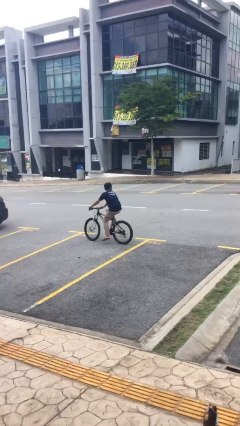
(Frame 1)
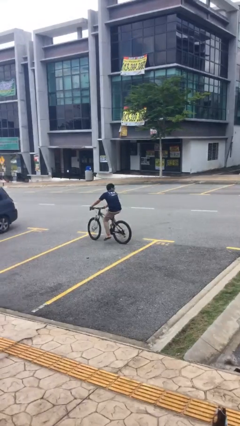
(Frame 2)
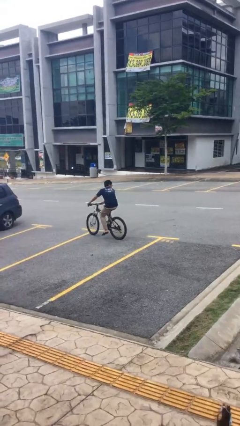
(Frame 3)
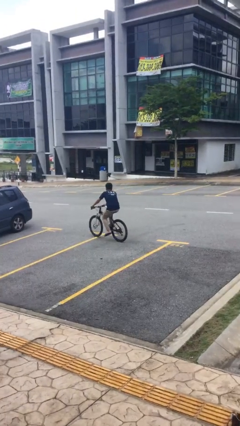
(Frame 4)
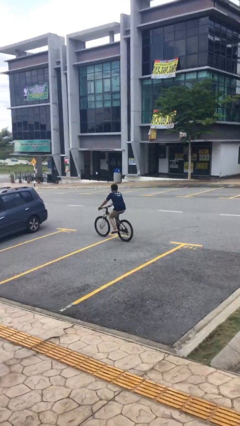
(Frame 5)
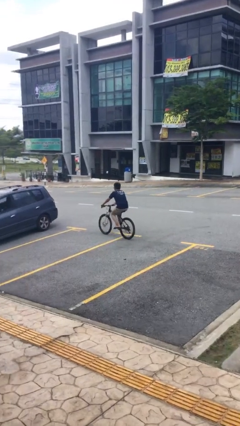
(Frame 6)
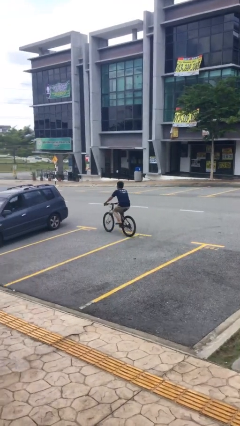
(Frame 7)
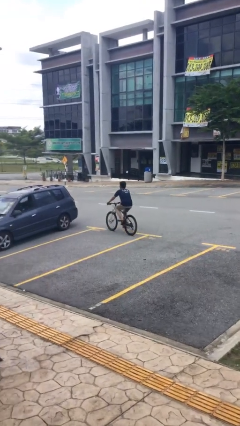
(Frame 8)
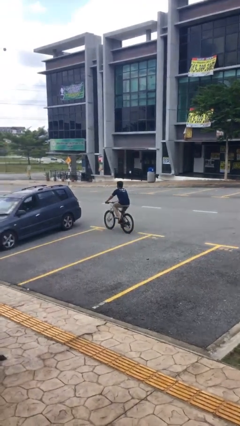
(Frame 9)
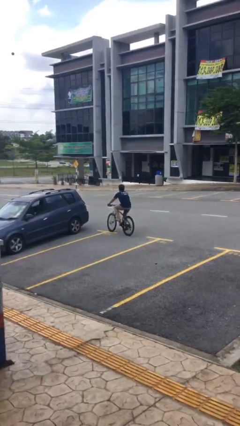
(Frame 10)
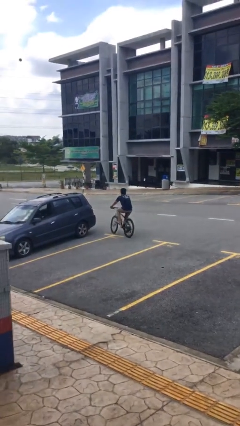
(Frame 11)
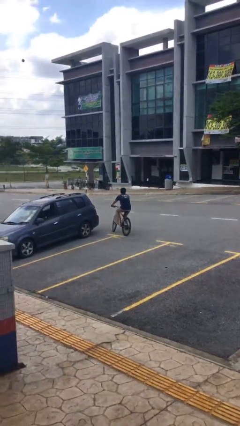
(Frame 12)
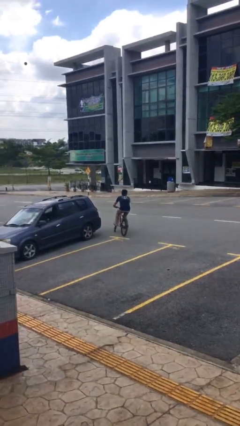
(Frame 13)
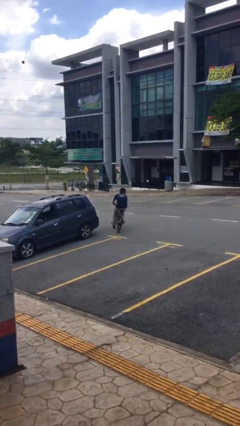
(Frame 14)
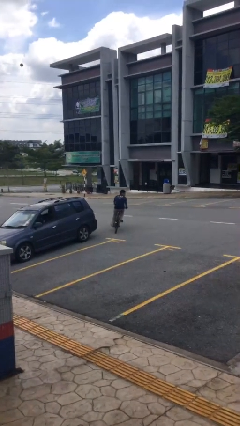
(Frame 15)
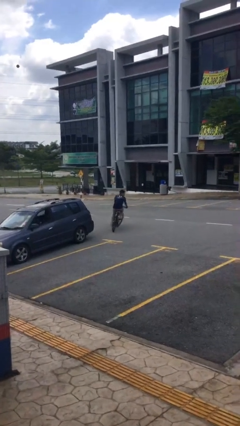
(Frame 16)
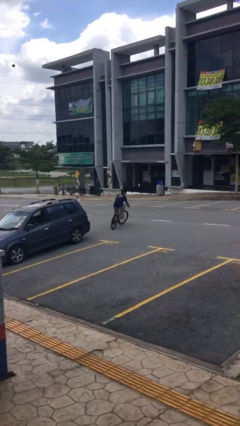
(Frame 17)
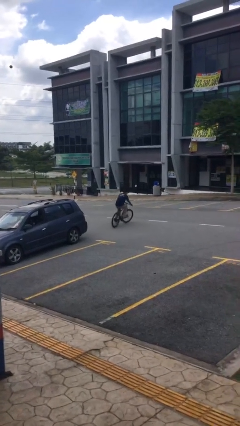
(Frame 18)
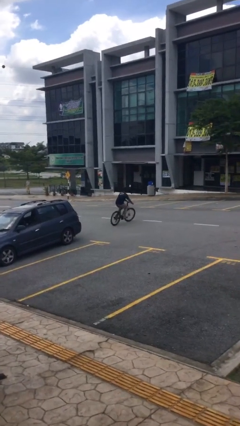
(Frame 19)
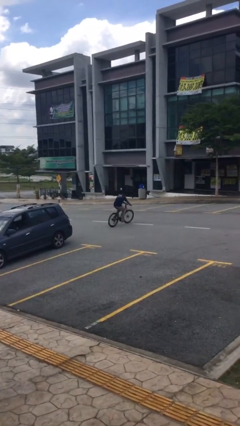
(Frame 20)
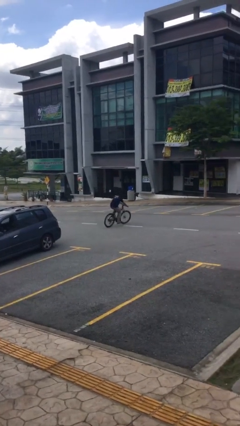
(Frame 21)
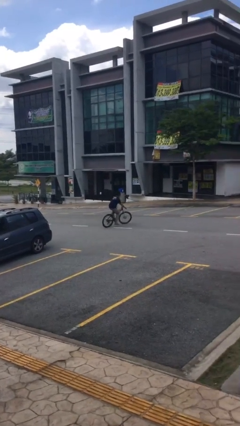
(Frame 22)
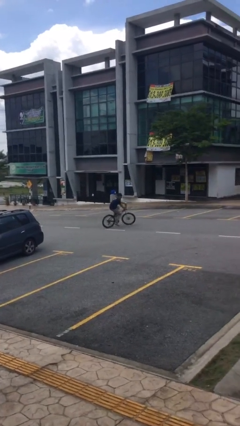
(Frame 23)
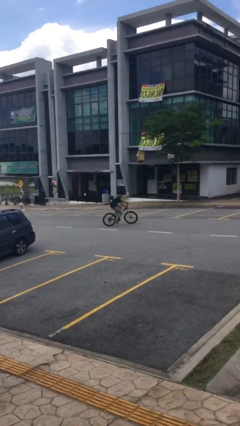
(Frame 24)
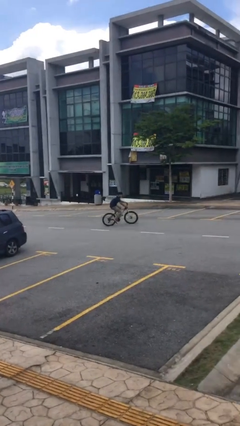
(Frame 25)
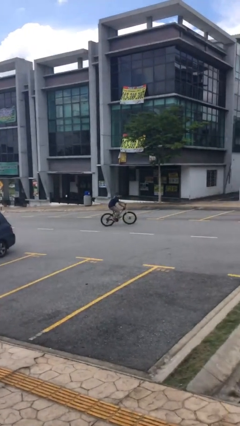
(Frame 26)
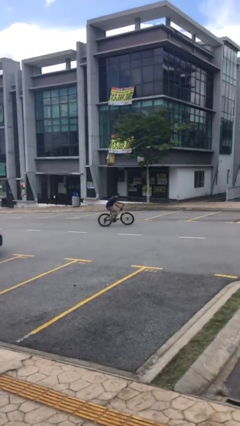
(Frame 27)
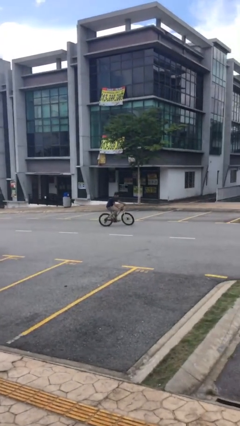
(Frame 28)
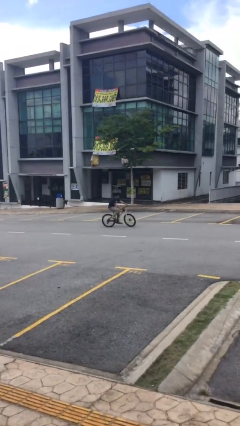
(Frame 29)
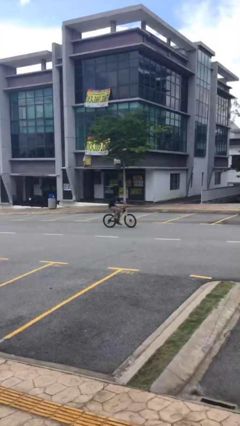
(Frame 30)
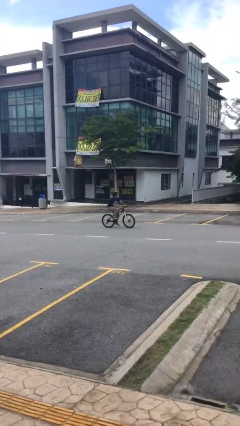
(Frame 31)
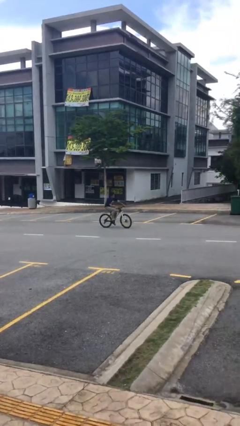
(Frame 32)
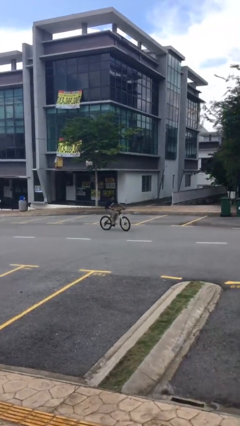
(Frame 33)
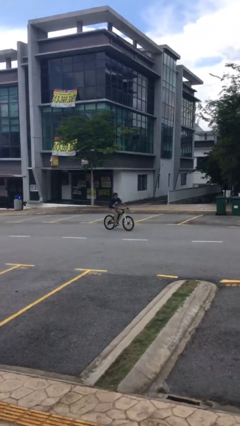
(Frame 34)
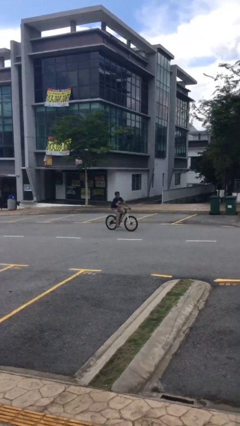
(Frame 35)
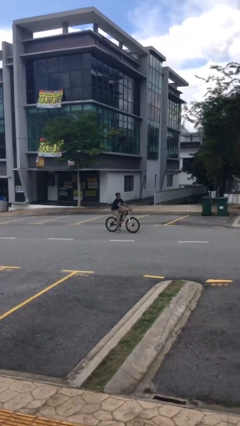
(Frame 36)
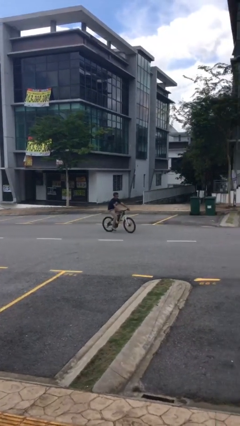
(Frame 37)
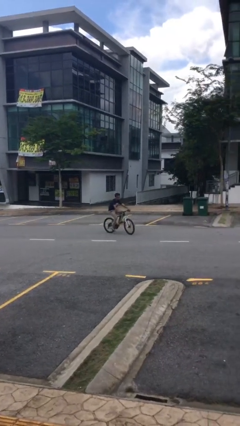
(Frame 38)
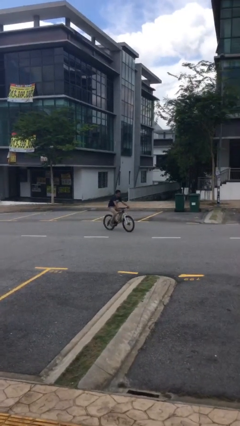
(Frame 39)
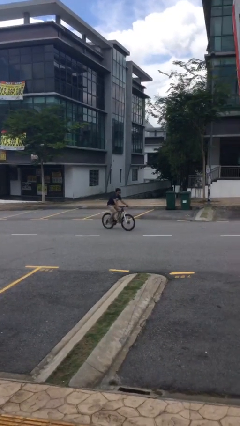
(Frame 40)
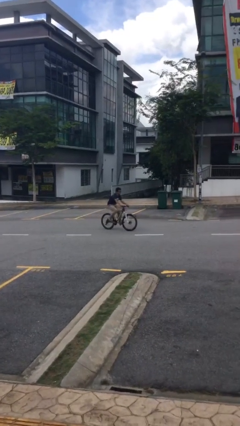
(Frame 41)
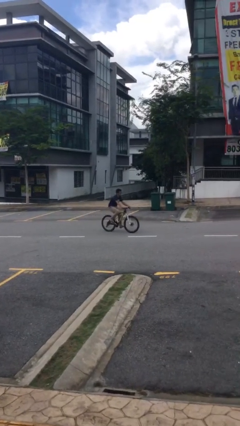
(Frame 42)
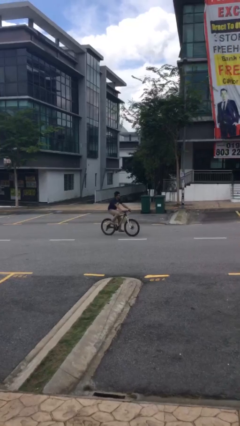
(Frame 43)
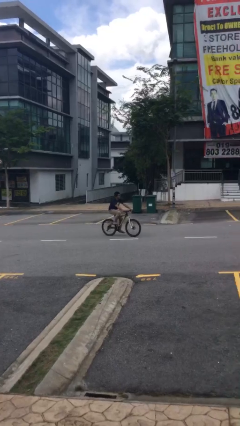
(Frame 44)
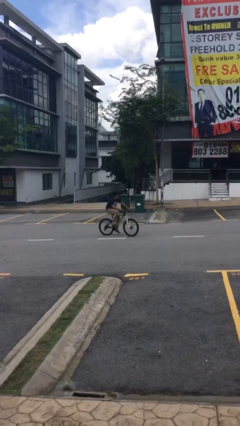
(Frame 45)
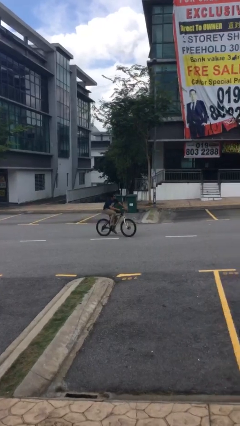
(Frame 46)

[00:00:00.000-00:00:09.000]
person rides bicycle

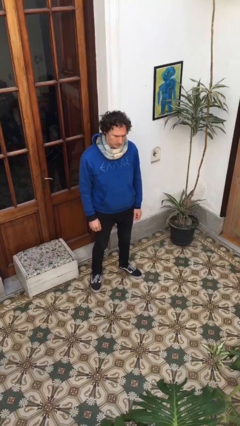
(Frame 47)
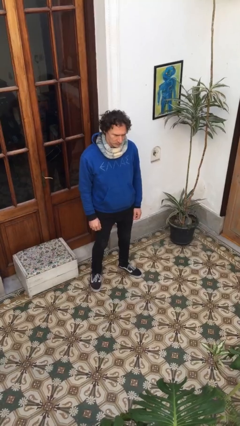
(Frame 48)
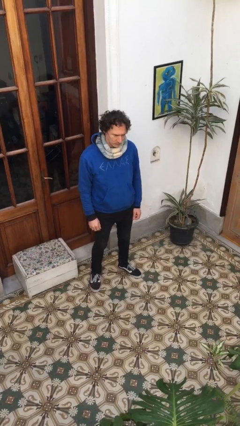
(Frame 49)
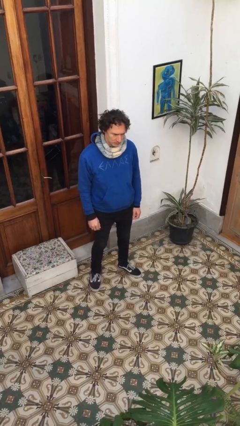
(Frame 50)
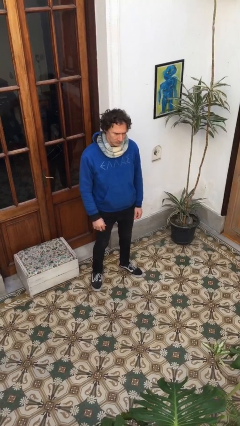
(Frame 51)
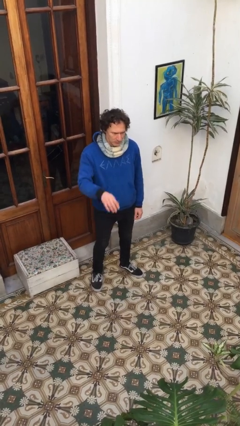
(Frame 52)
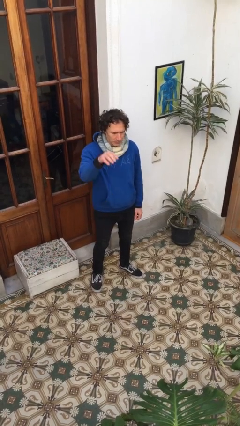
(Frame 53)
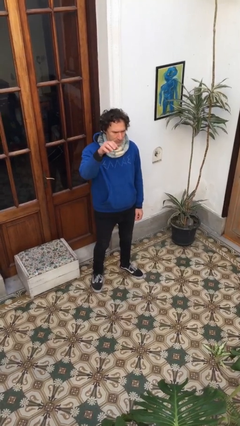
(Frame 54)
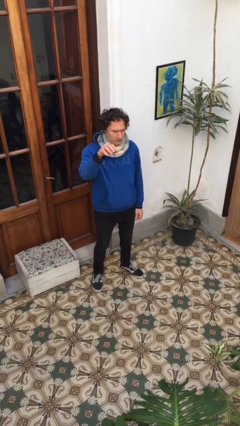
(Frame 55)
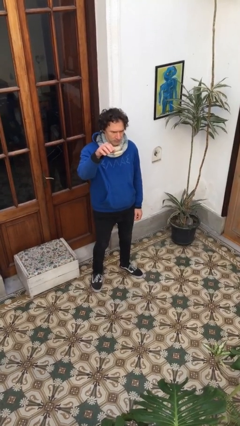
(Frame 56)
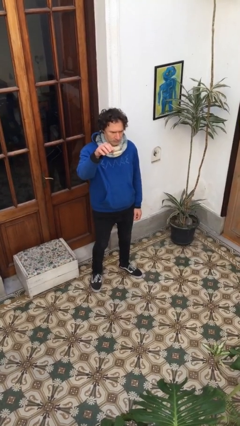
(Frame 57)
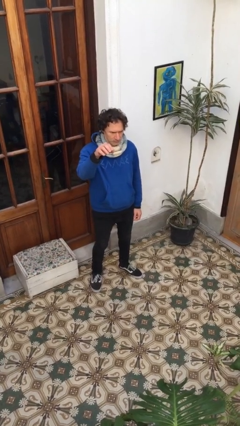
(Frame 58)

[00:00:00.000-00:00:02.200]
person gestures swipe up

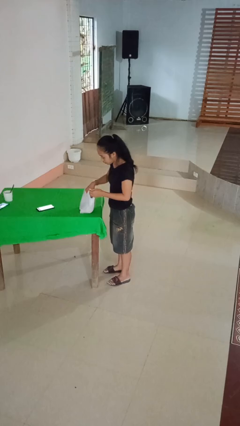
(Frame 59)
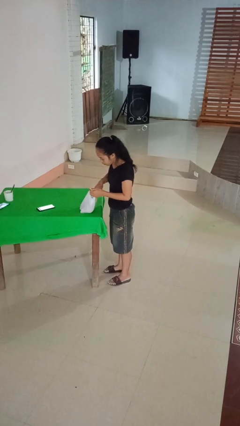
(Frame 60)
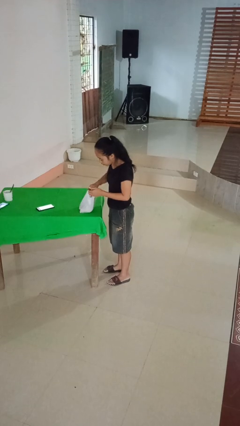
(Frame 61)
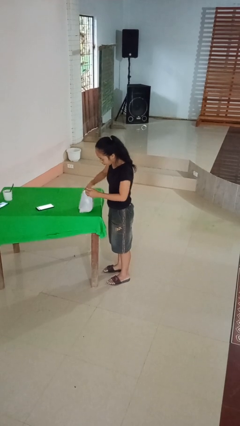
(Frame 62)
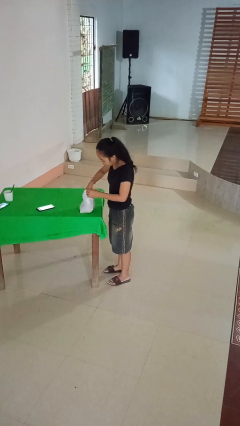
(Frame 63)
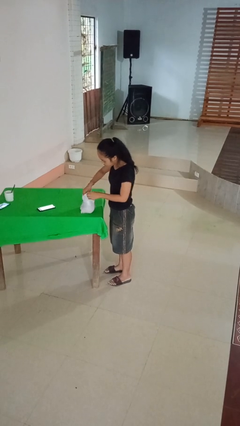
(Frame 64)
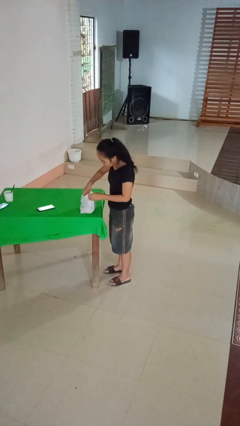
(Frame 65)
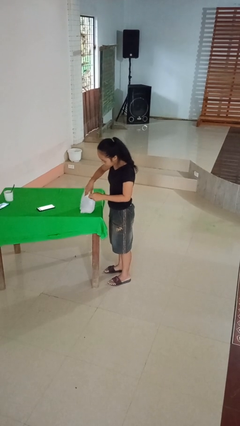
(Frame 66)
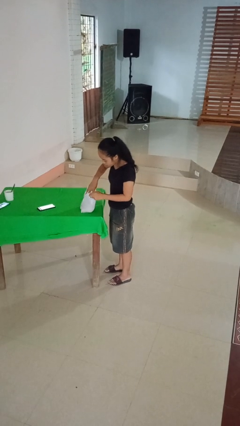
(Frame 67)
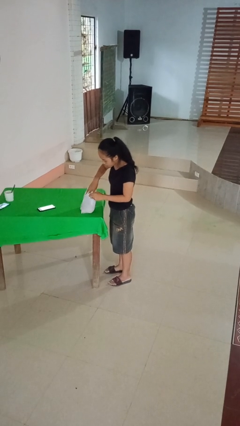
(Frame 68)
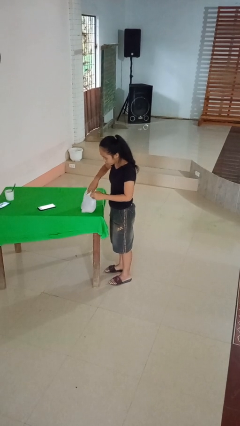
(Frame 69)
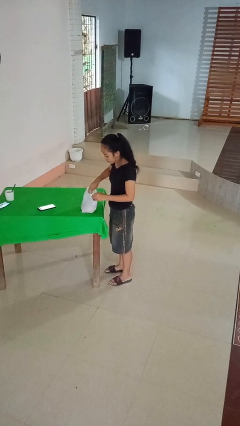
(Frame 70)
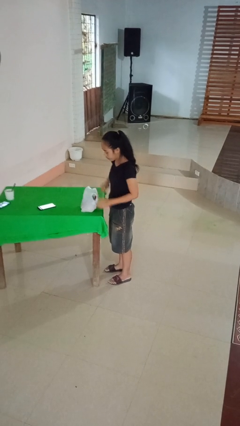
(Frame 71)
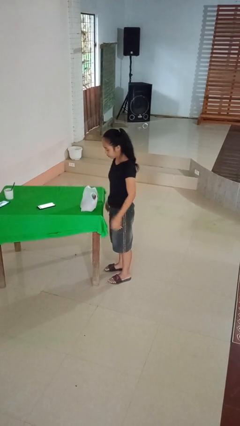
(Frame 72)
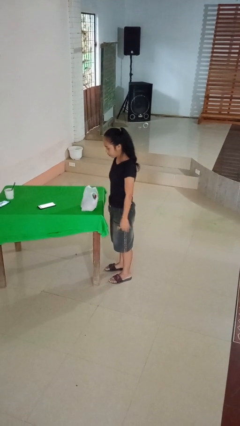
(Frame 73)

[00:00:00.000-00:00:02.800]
person searches in bag

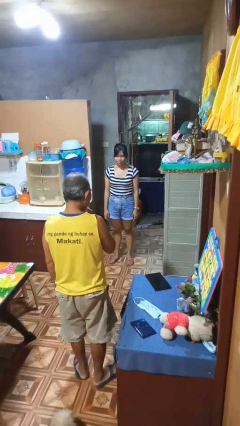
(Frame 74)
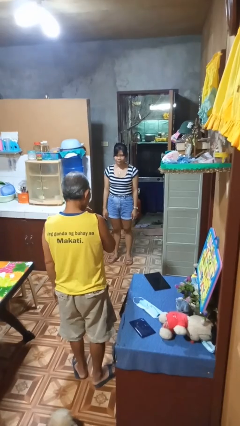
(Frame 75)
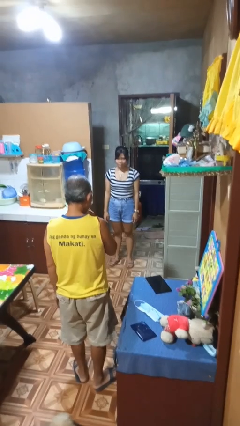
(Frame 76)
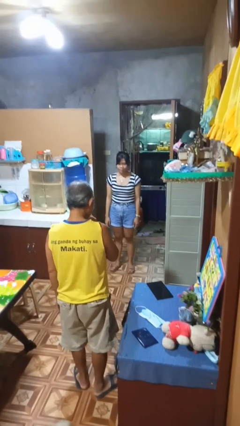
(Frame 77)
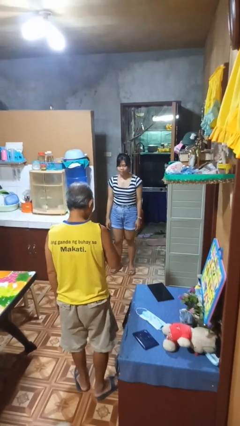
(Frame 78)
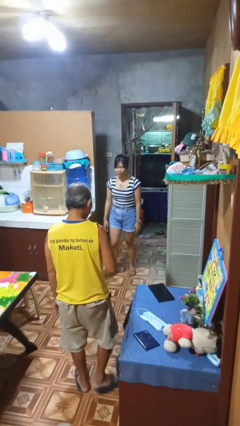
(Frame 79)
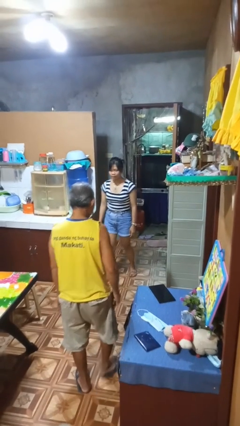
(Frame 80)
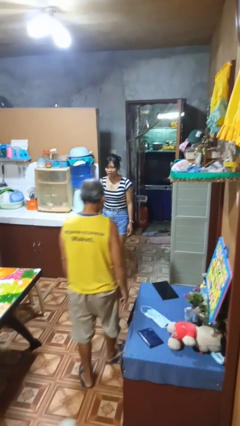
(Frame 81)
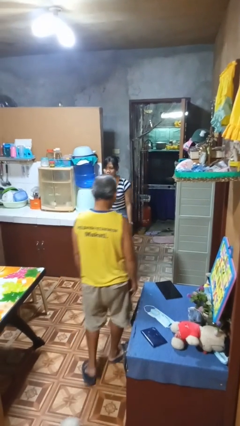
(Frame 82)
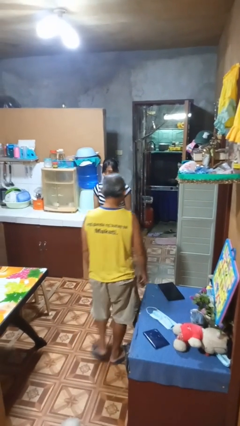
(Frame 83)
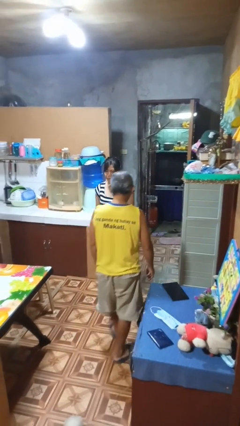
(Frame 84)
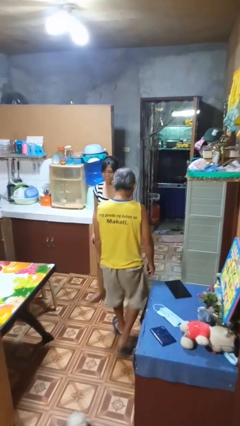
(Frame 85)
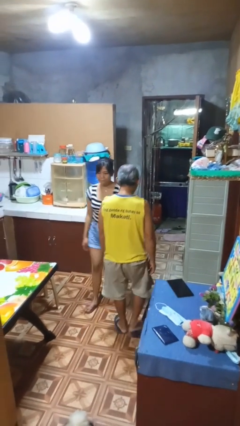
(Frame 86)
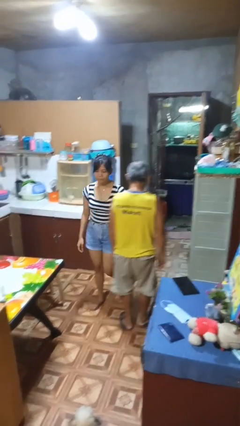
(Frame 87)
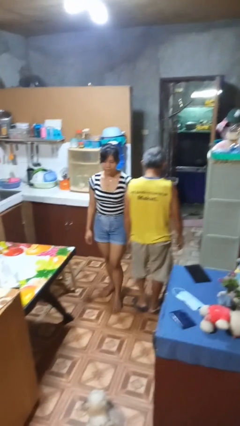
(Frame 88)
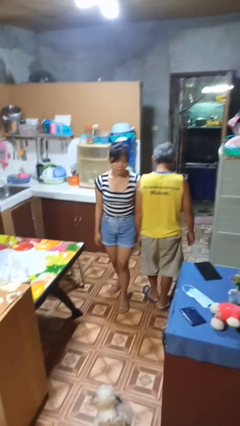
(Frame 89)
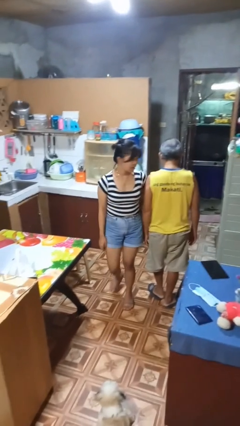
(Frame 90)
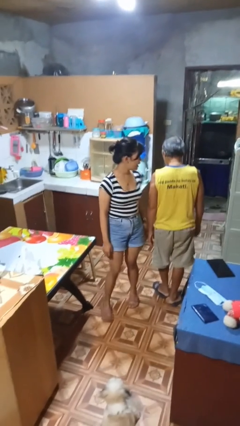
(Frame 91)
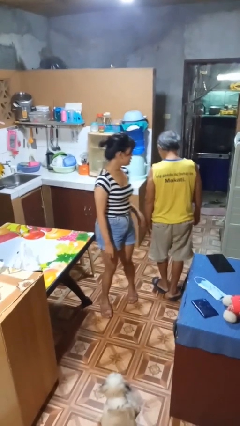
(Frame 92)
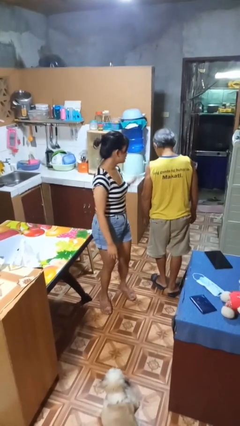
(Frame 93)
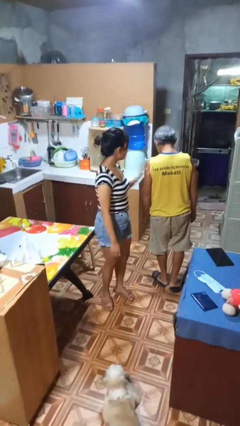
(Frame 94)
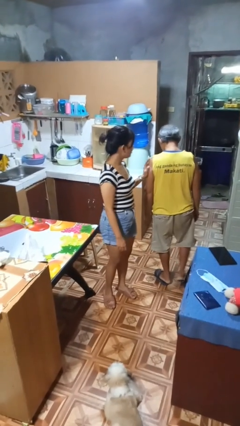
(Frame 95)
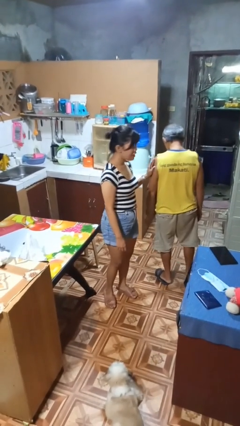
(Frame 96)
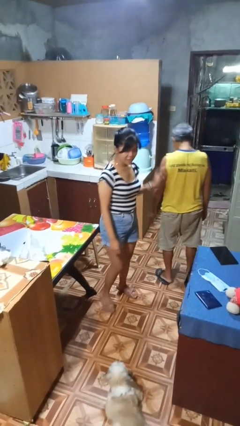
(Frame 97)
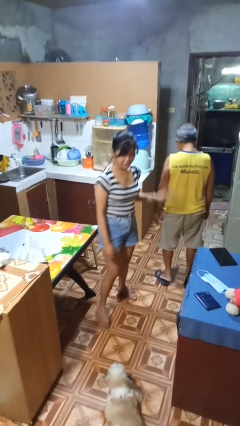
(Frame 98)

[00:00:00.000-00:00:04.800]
person bumps into person
